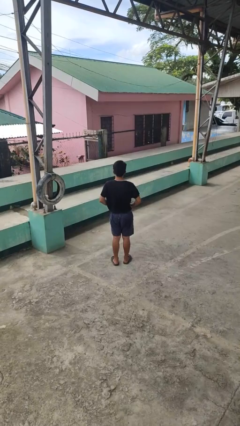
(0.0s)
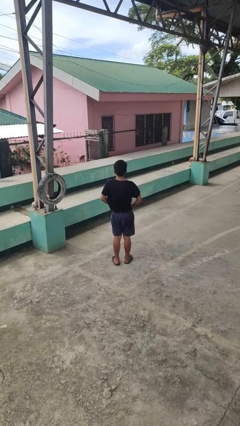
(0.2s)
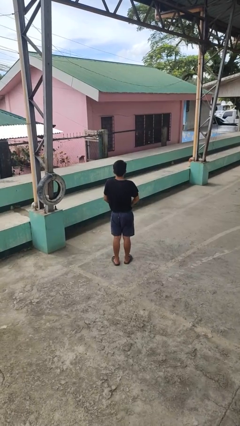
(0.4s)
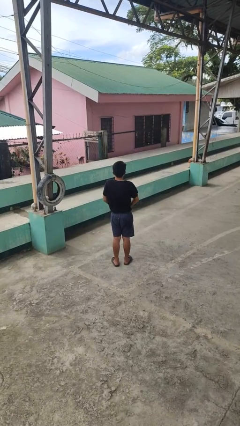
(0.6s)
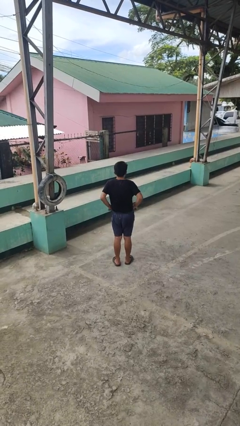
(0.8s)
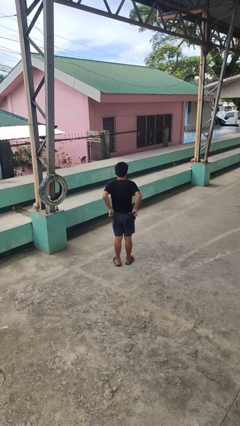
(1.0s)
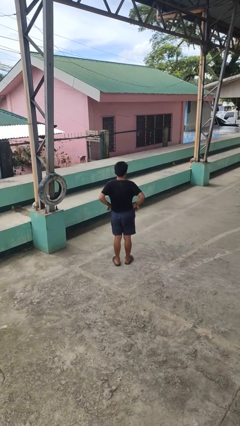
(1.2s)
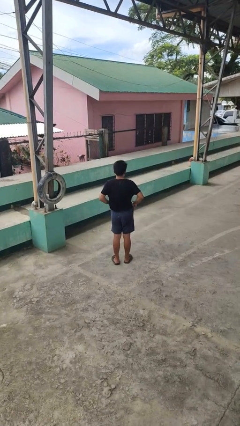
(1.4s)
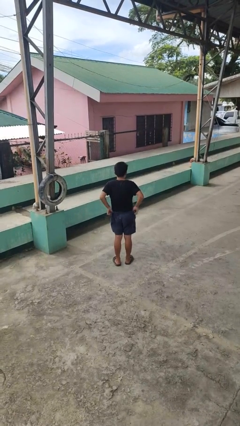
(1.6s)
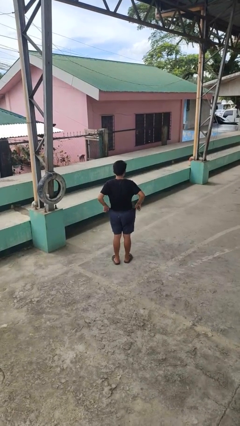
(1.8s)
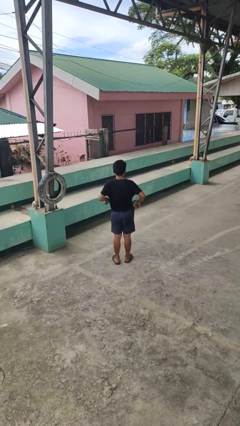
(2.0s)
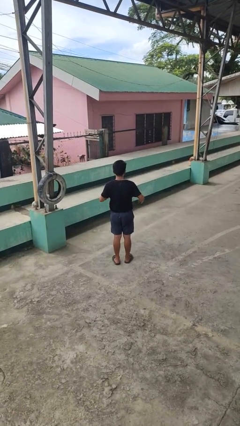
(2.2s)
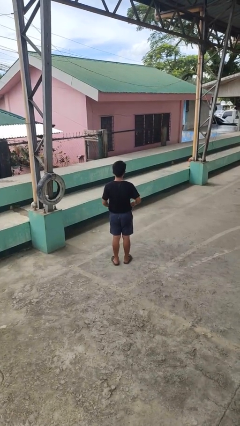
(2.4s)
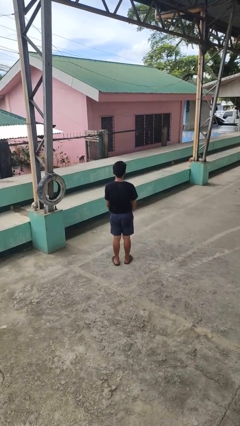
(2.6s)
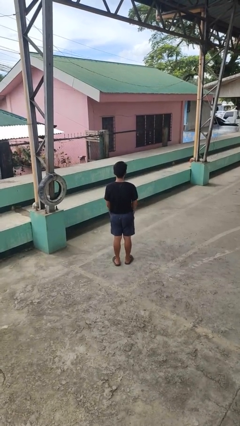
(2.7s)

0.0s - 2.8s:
person hikes up pants

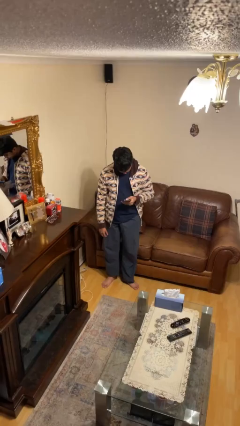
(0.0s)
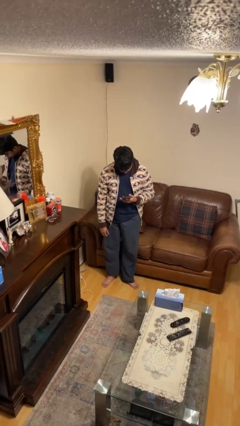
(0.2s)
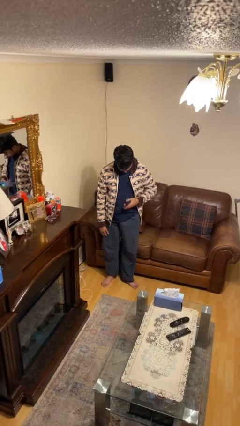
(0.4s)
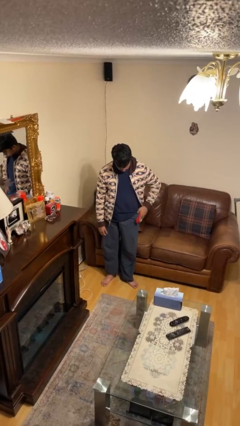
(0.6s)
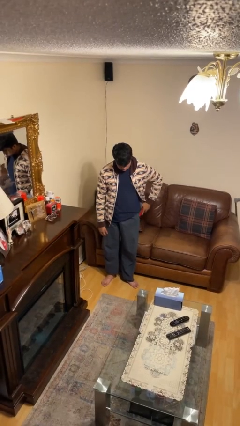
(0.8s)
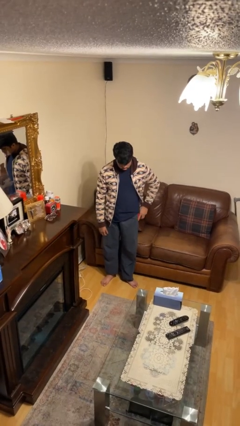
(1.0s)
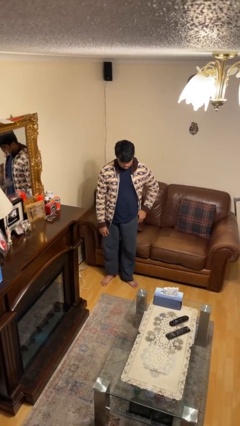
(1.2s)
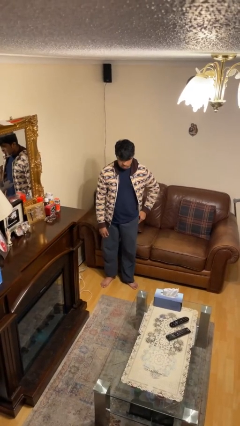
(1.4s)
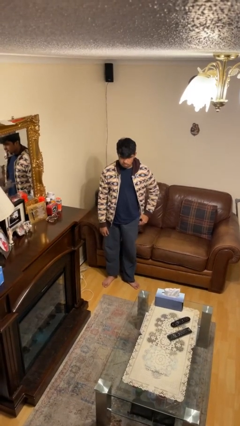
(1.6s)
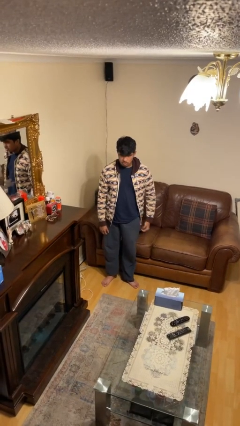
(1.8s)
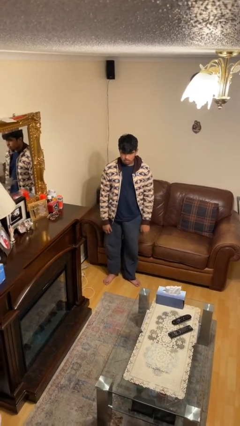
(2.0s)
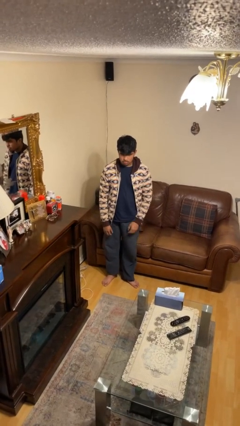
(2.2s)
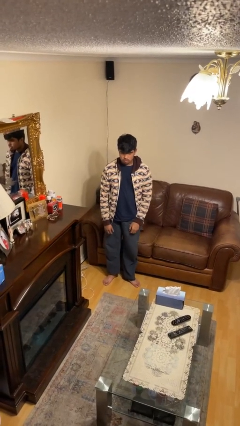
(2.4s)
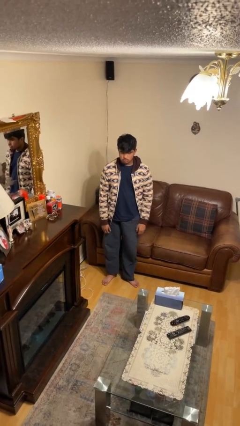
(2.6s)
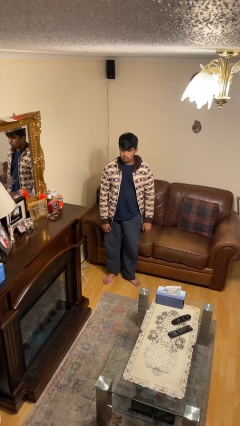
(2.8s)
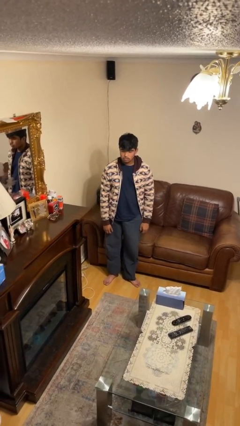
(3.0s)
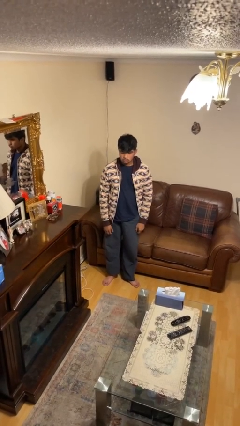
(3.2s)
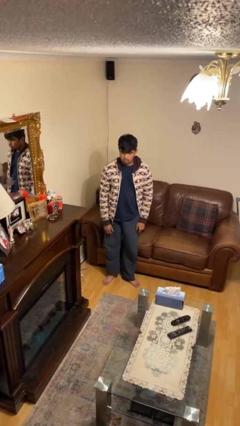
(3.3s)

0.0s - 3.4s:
person puts phone into pocket

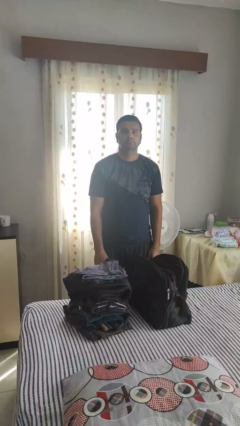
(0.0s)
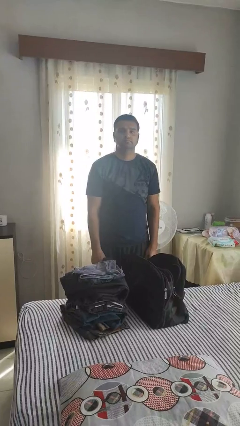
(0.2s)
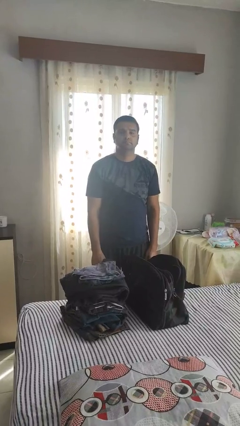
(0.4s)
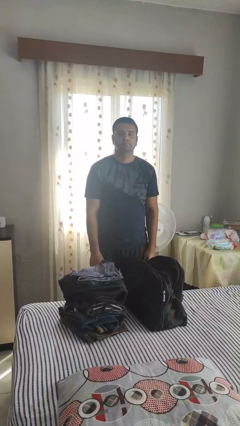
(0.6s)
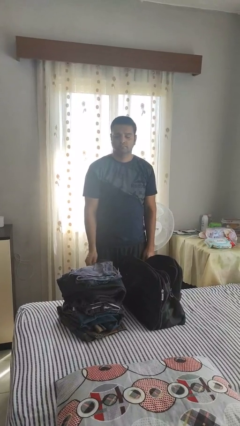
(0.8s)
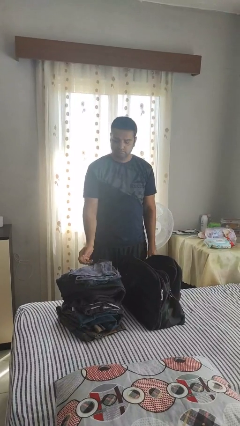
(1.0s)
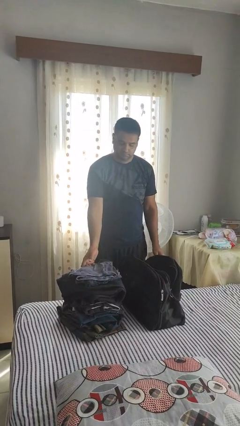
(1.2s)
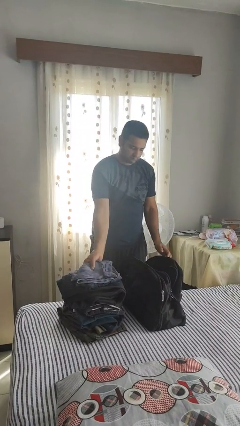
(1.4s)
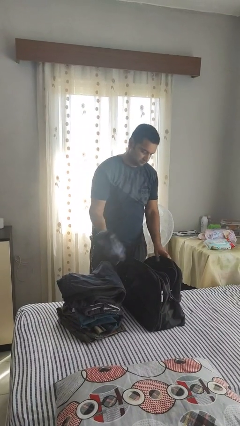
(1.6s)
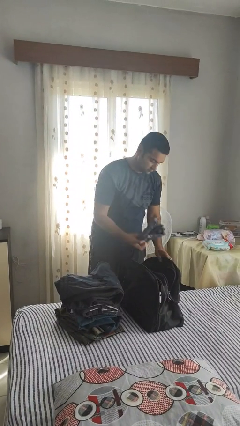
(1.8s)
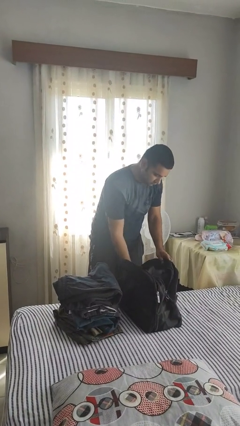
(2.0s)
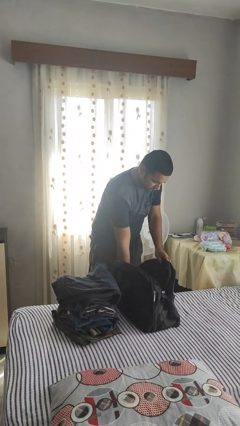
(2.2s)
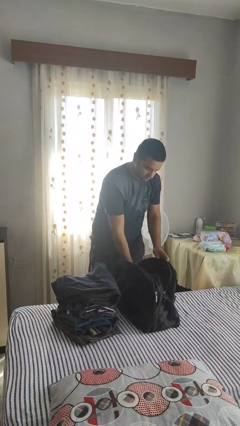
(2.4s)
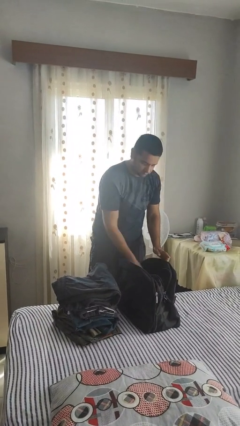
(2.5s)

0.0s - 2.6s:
person loads clothes into suitcase

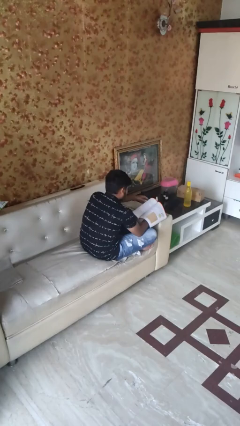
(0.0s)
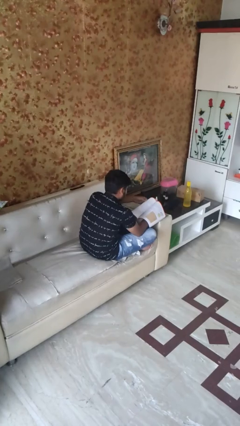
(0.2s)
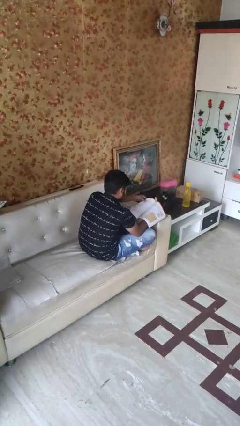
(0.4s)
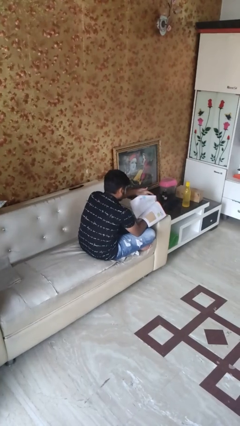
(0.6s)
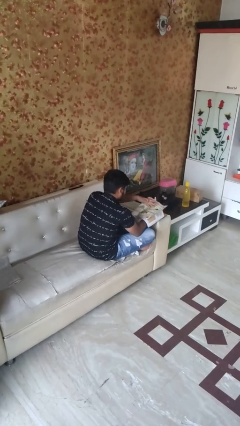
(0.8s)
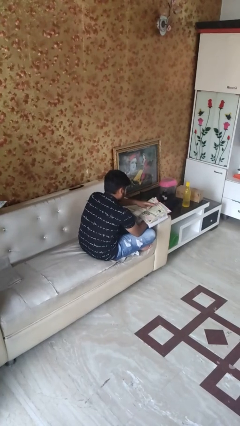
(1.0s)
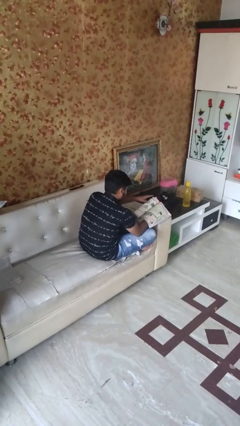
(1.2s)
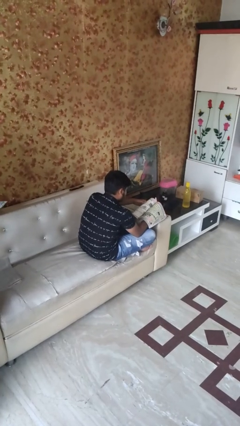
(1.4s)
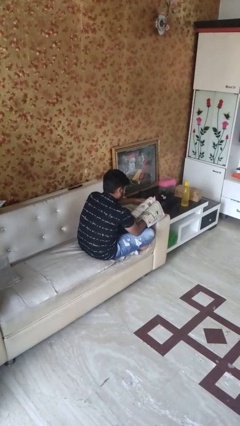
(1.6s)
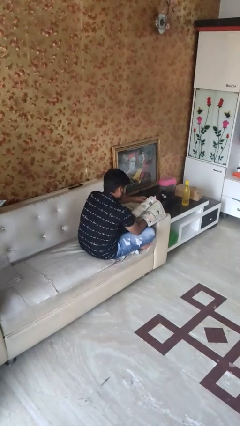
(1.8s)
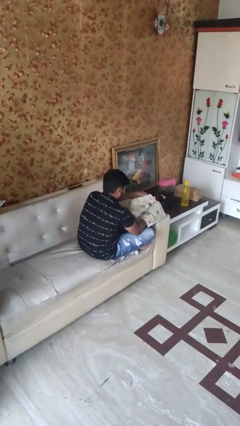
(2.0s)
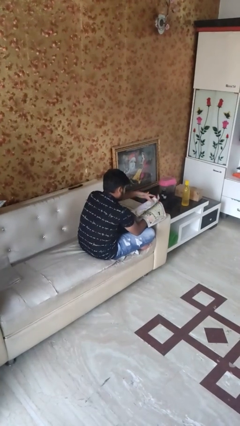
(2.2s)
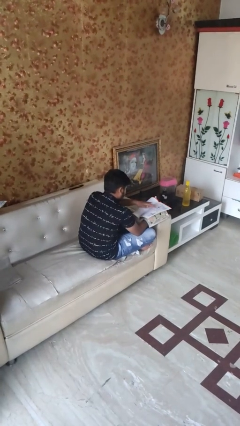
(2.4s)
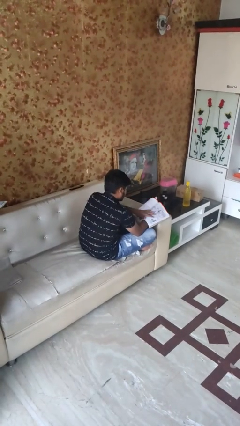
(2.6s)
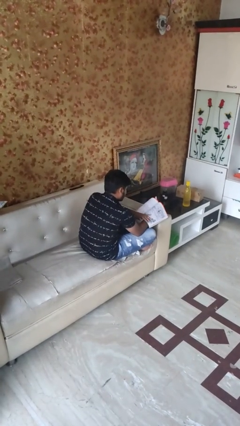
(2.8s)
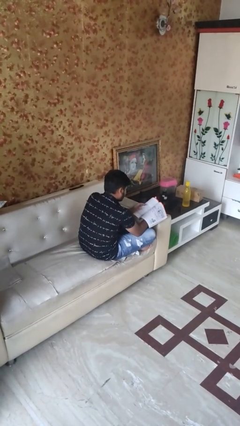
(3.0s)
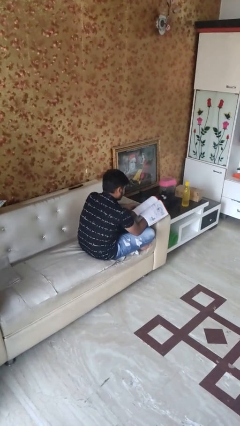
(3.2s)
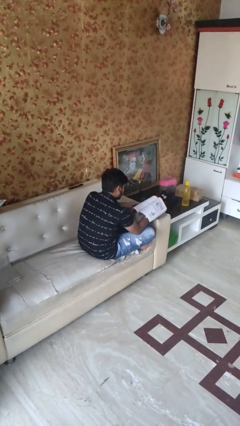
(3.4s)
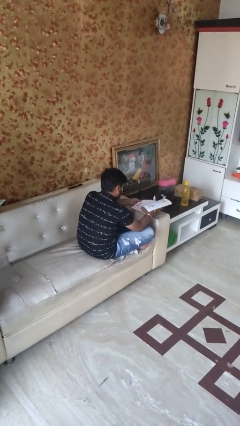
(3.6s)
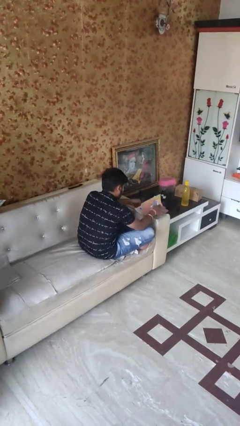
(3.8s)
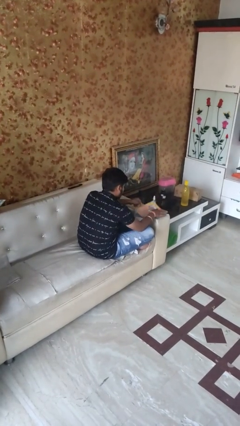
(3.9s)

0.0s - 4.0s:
person reads magazine

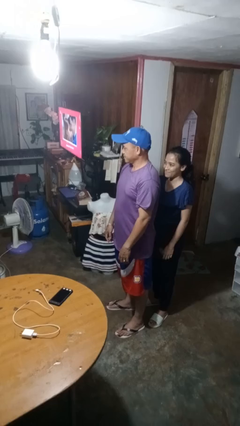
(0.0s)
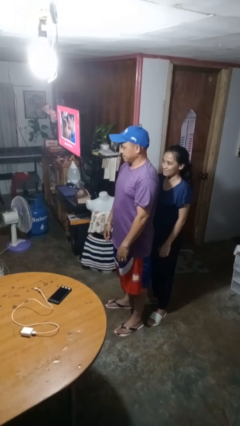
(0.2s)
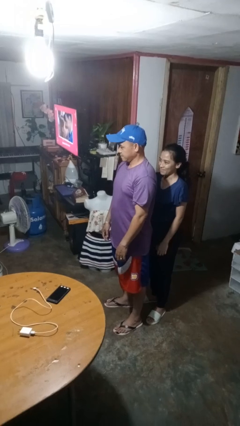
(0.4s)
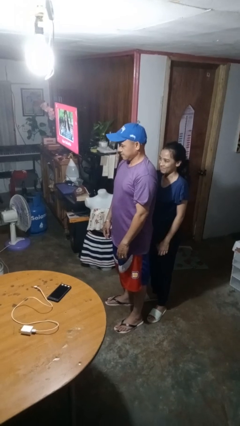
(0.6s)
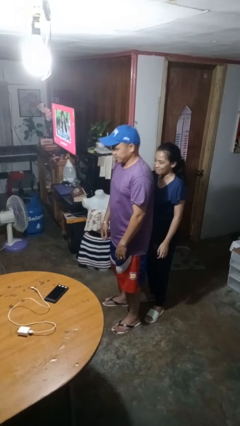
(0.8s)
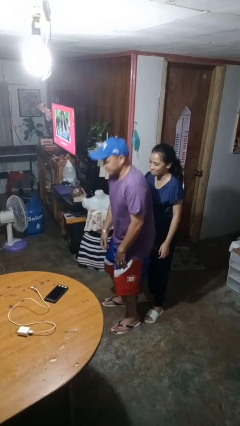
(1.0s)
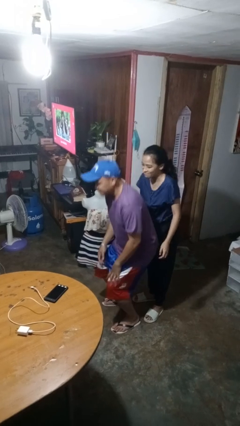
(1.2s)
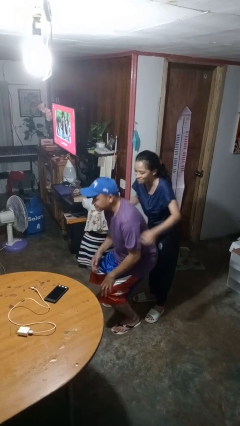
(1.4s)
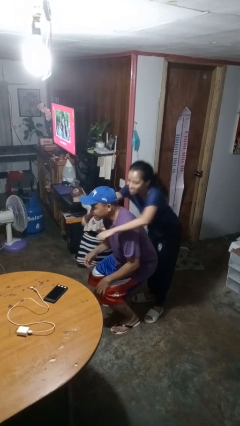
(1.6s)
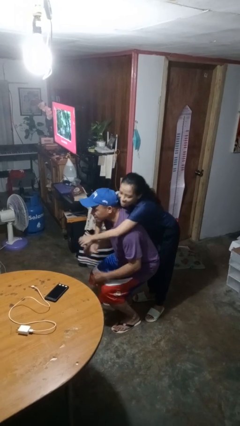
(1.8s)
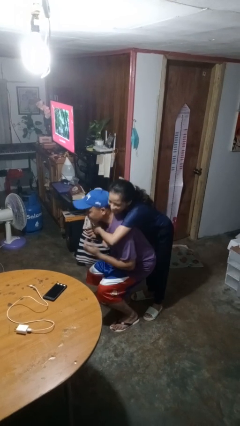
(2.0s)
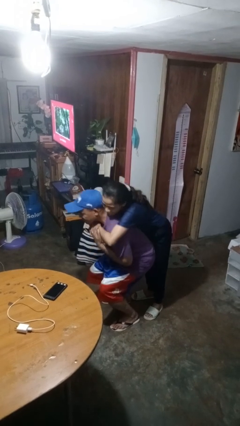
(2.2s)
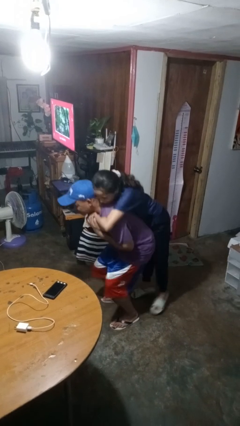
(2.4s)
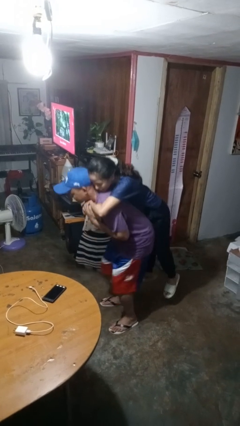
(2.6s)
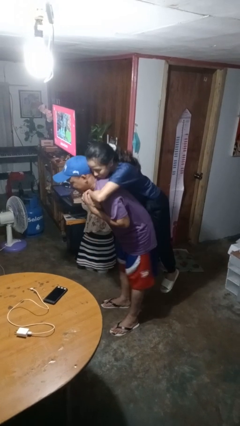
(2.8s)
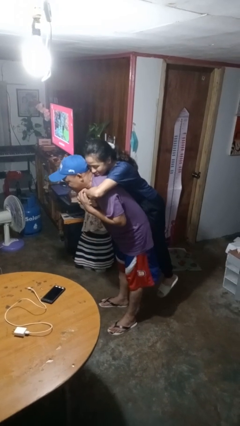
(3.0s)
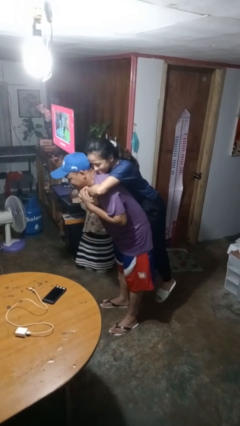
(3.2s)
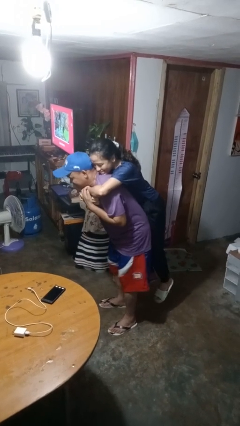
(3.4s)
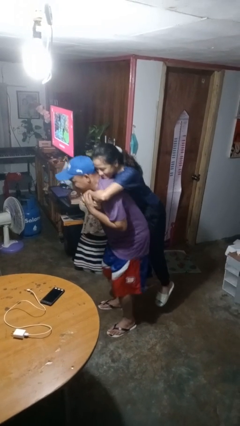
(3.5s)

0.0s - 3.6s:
person picks up person

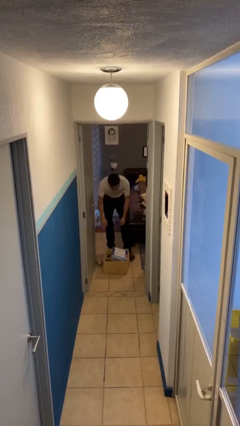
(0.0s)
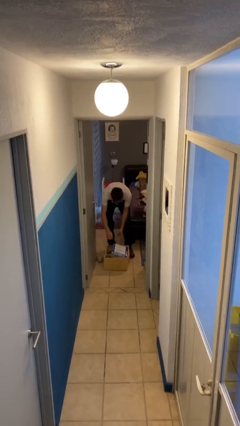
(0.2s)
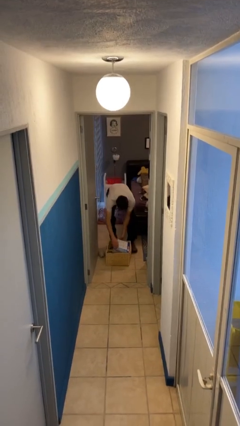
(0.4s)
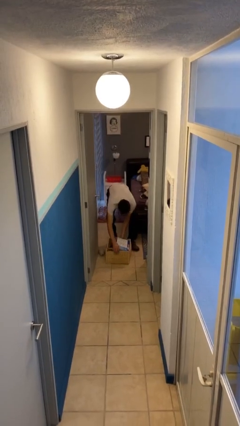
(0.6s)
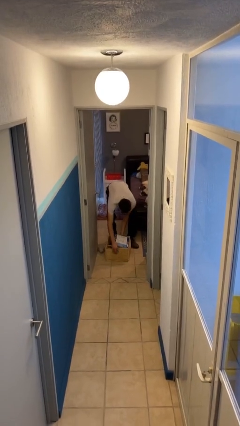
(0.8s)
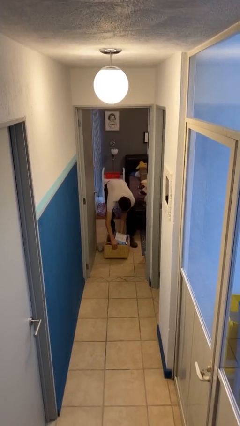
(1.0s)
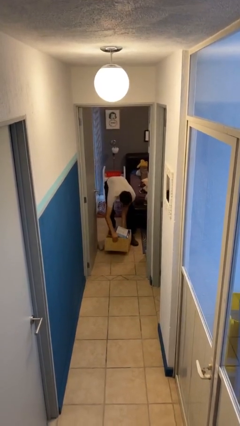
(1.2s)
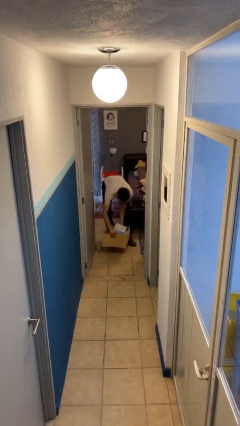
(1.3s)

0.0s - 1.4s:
person picks up object from floor
